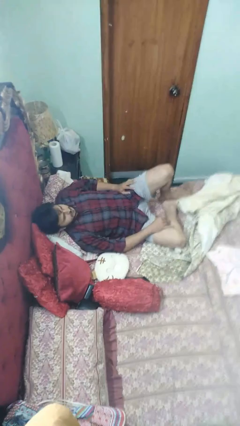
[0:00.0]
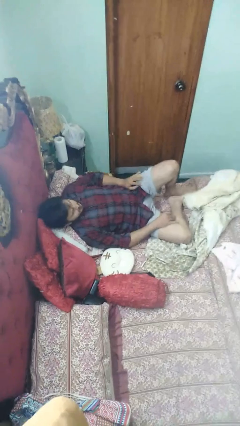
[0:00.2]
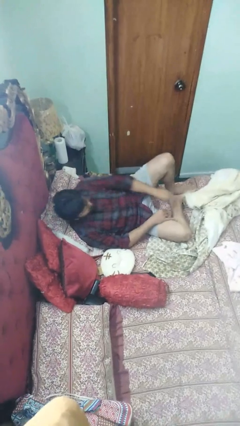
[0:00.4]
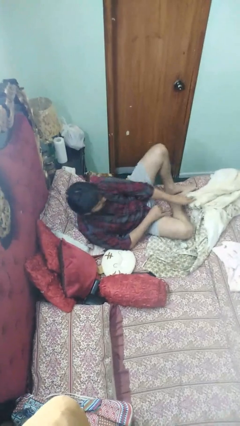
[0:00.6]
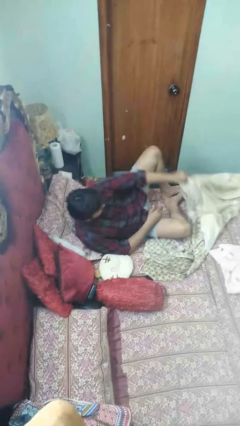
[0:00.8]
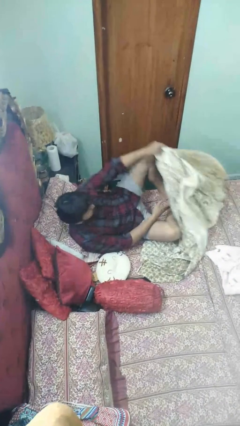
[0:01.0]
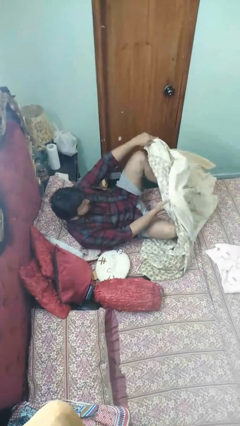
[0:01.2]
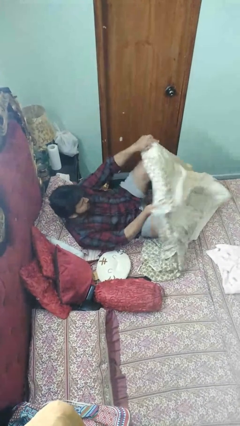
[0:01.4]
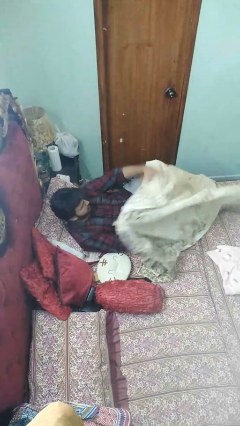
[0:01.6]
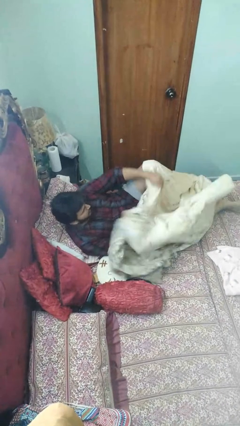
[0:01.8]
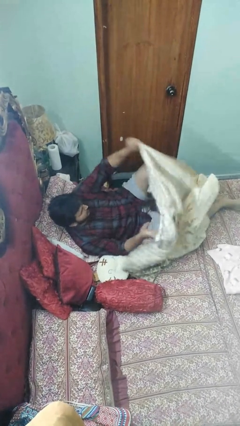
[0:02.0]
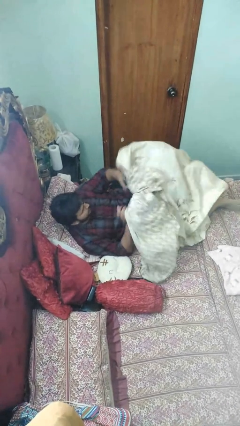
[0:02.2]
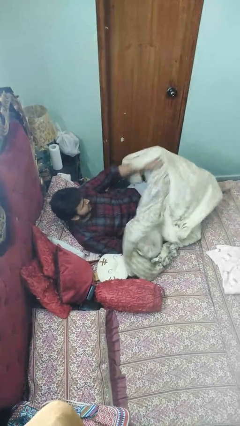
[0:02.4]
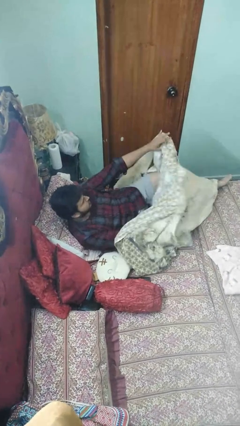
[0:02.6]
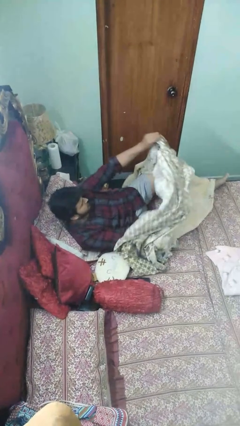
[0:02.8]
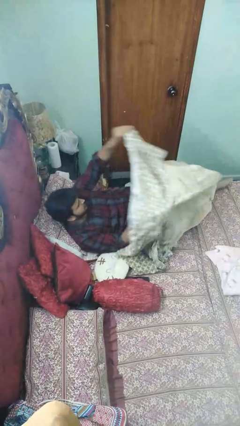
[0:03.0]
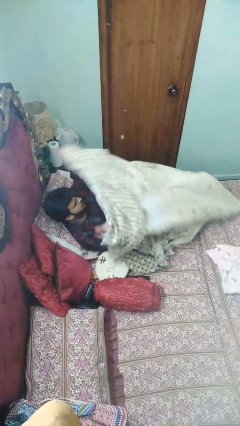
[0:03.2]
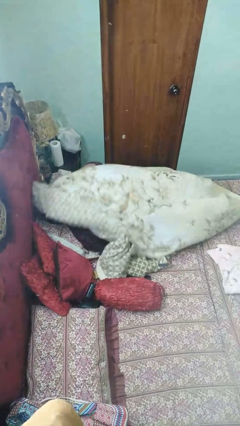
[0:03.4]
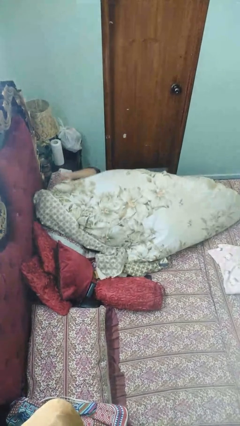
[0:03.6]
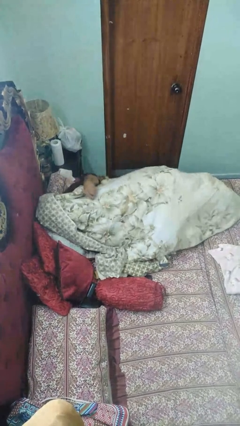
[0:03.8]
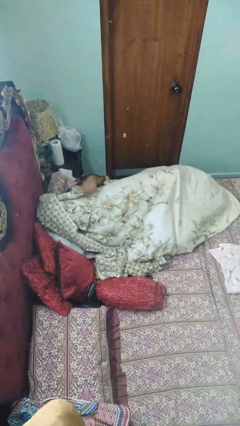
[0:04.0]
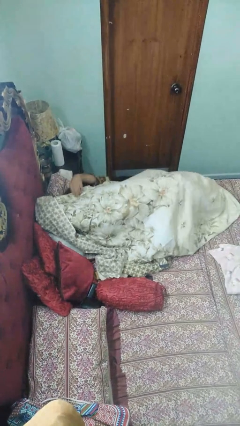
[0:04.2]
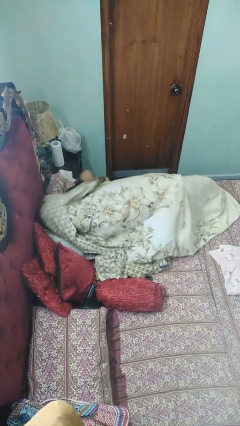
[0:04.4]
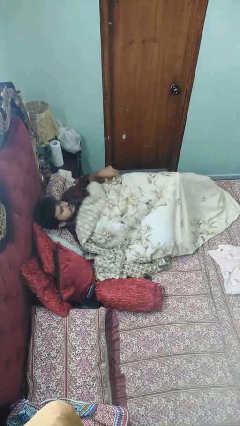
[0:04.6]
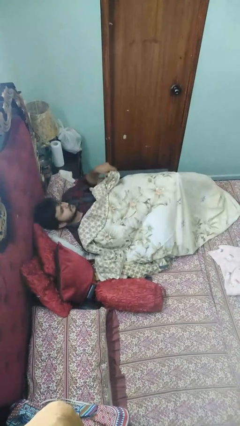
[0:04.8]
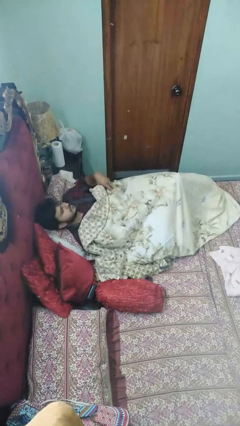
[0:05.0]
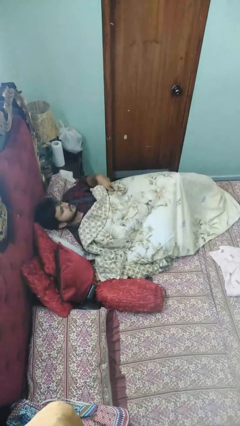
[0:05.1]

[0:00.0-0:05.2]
person covers with bedsheets

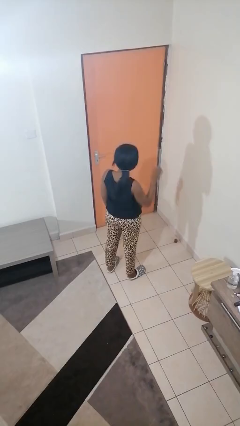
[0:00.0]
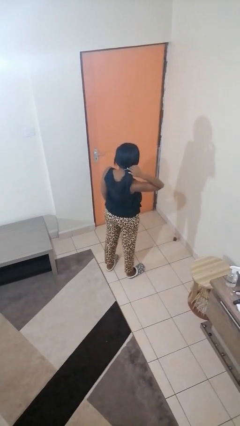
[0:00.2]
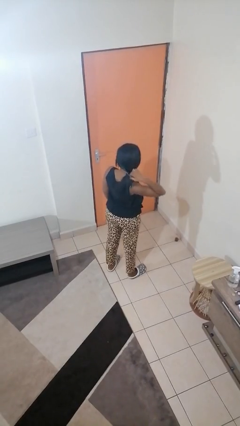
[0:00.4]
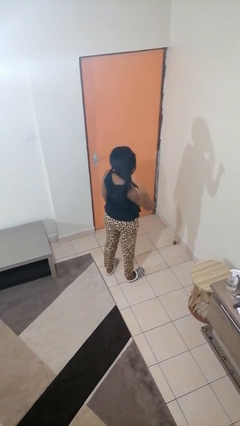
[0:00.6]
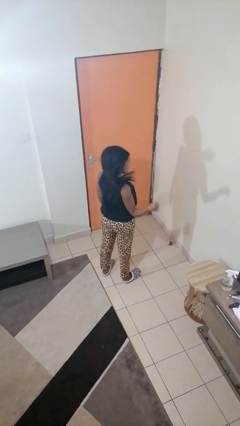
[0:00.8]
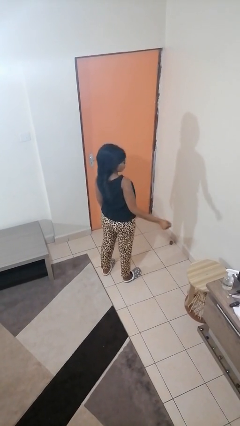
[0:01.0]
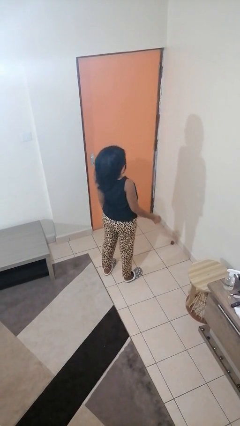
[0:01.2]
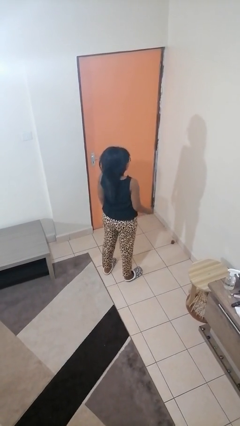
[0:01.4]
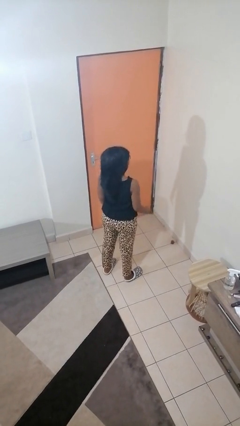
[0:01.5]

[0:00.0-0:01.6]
person takes off hairtie

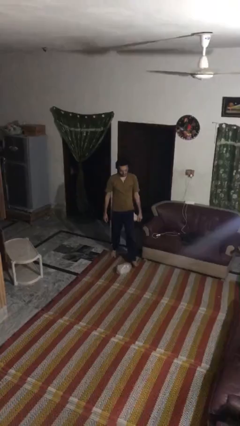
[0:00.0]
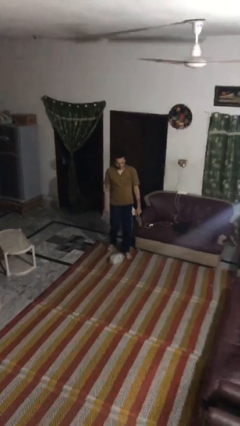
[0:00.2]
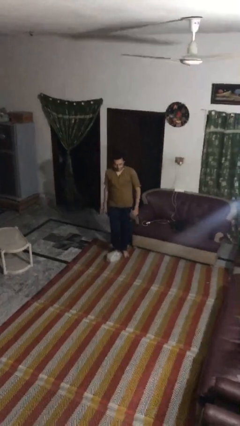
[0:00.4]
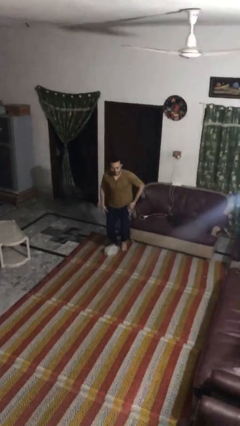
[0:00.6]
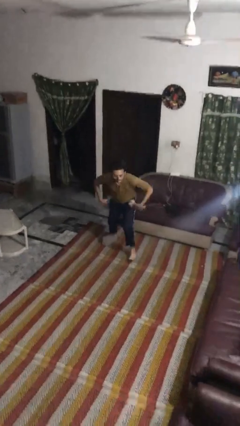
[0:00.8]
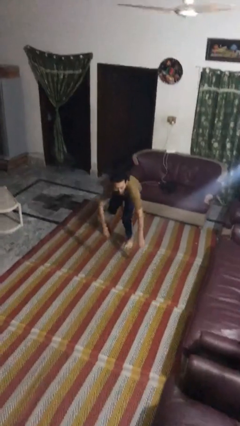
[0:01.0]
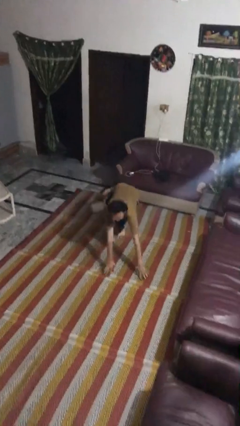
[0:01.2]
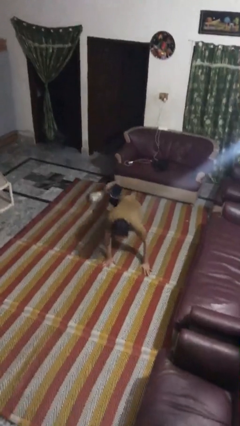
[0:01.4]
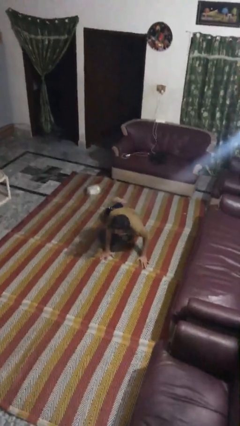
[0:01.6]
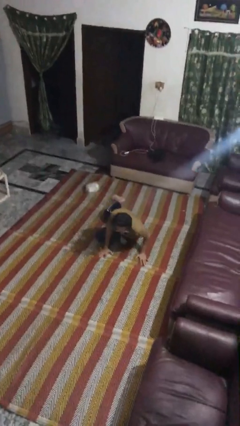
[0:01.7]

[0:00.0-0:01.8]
person trips on object on floor

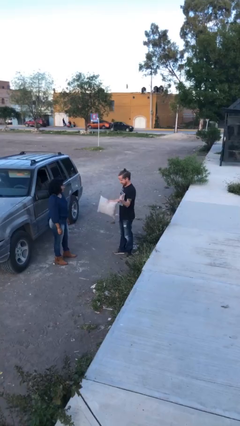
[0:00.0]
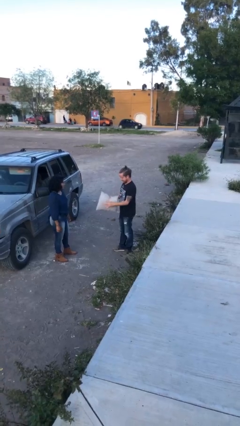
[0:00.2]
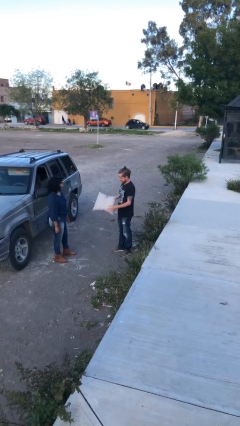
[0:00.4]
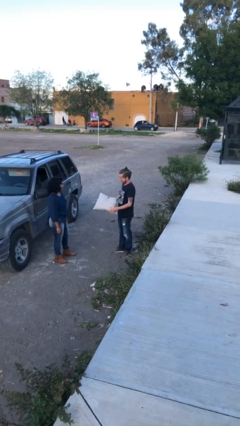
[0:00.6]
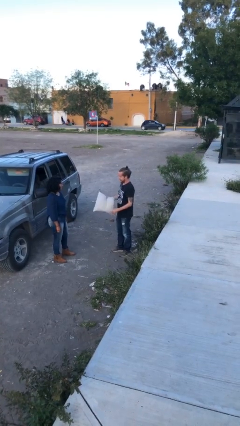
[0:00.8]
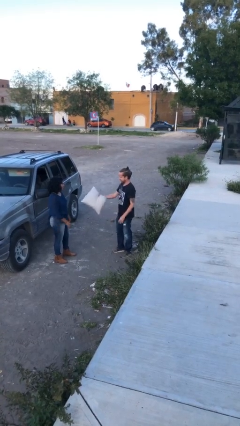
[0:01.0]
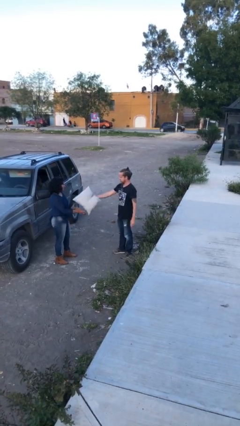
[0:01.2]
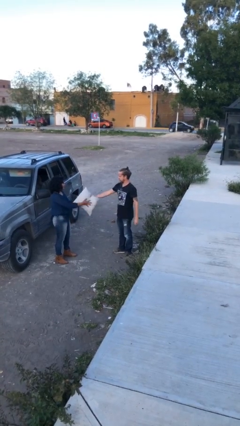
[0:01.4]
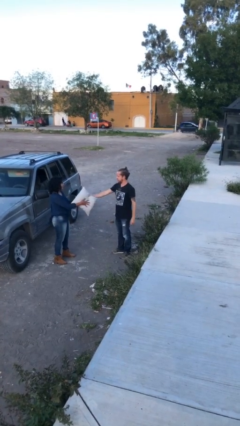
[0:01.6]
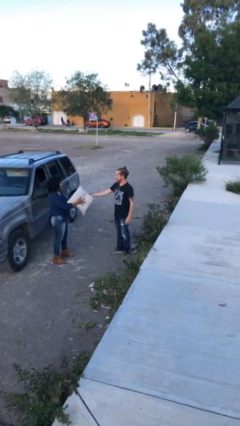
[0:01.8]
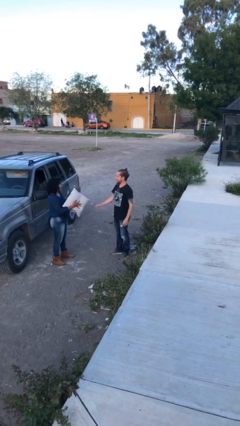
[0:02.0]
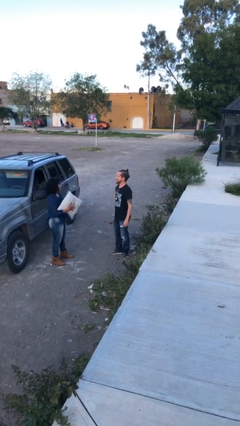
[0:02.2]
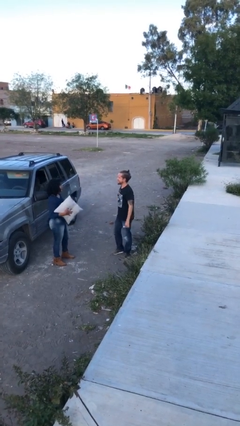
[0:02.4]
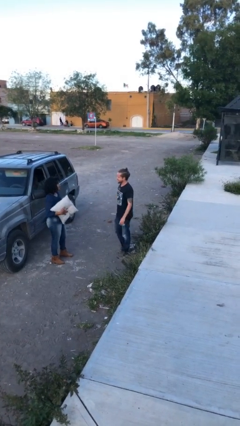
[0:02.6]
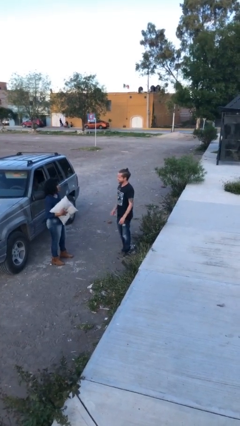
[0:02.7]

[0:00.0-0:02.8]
person transfers object to person

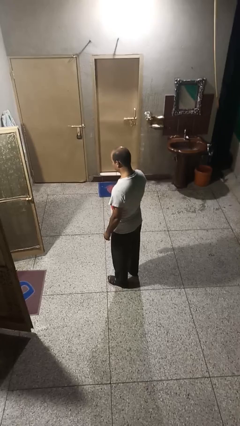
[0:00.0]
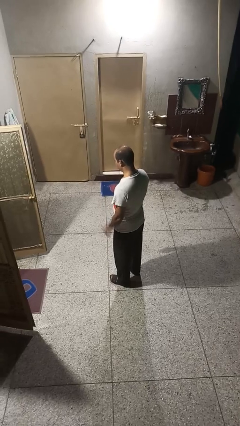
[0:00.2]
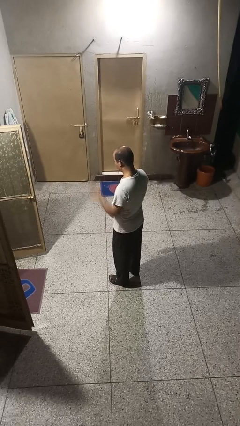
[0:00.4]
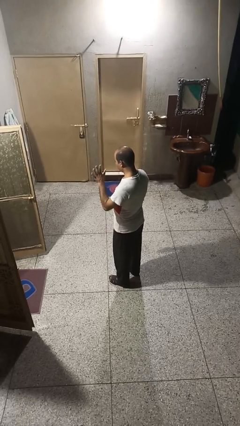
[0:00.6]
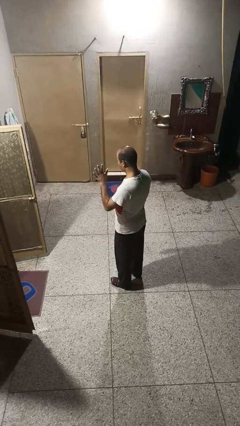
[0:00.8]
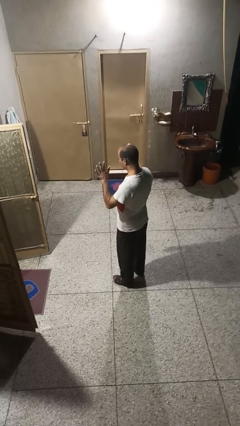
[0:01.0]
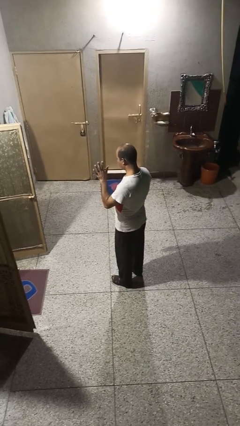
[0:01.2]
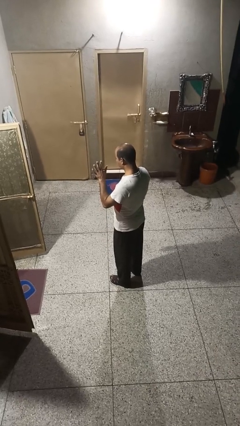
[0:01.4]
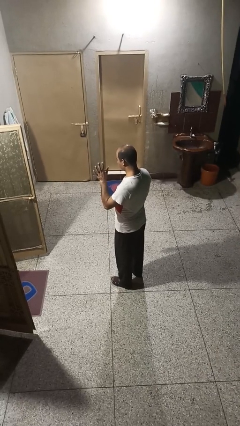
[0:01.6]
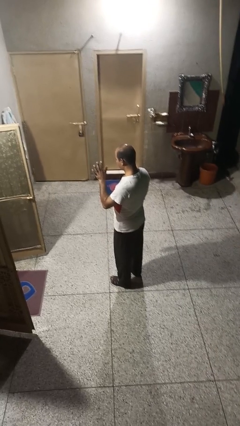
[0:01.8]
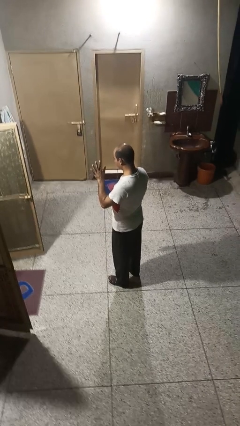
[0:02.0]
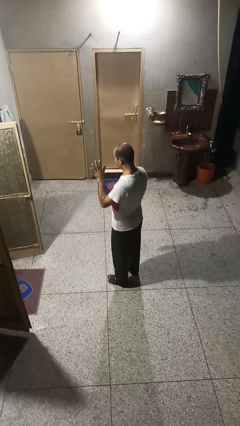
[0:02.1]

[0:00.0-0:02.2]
person gestures number five

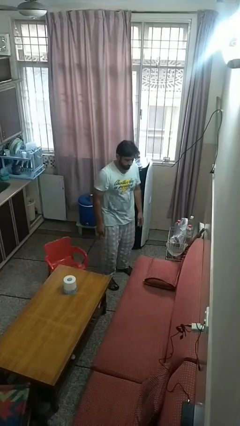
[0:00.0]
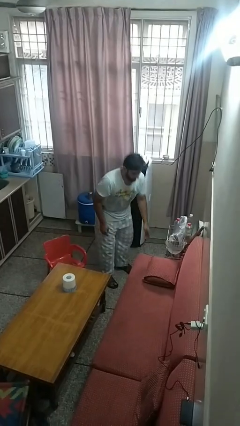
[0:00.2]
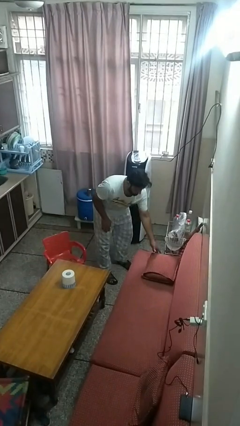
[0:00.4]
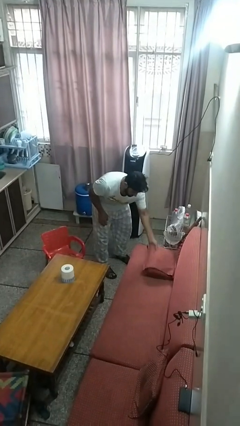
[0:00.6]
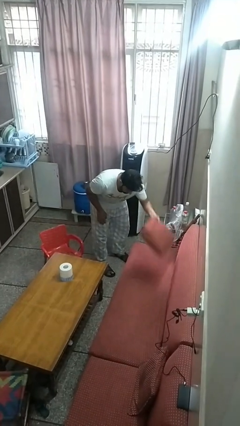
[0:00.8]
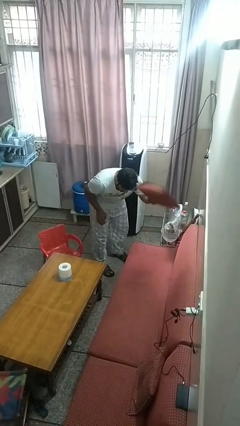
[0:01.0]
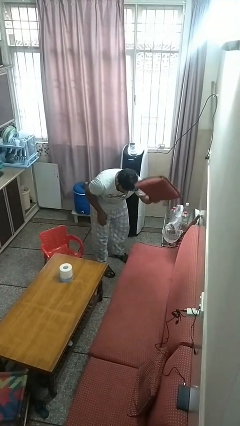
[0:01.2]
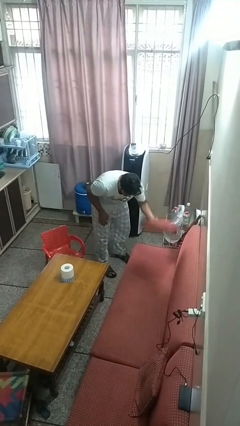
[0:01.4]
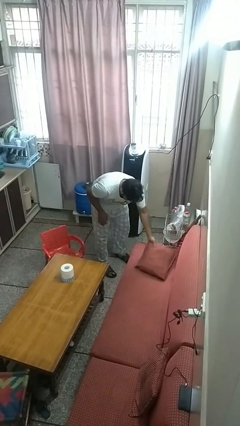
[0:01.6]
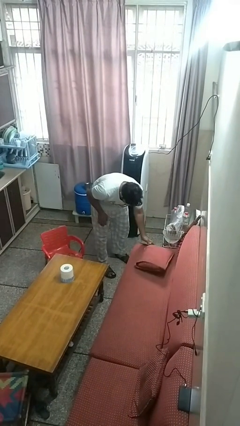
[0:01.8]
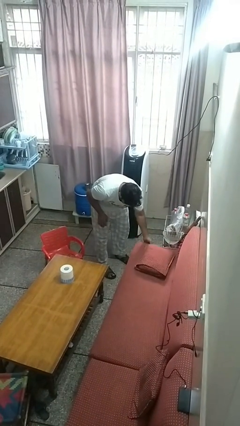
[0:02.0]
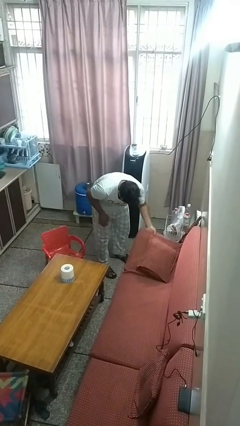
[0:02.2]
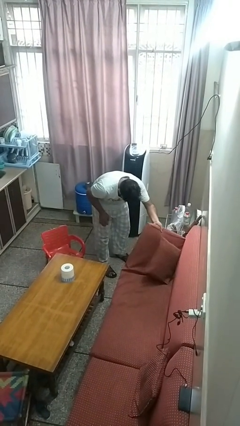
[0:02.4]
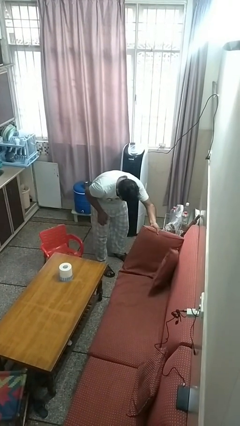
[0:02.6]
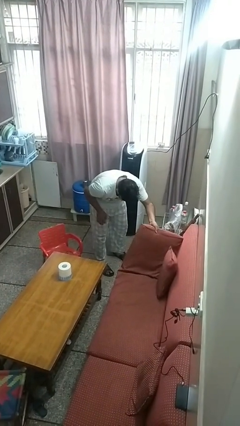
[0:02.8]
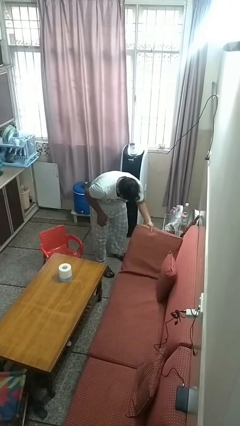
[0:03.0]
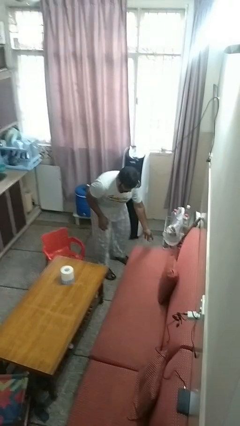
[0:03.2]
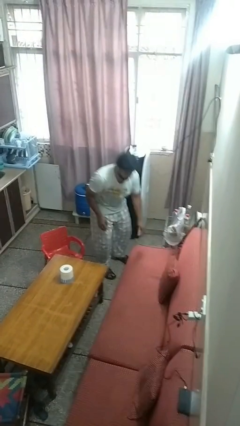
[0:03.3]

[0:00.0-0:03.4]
person searches under couch
